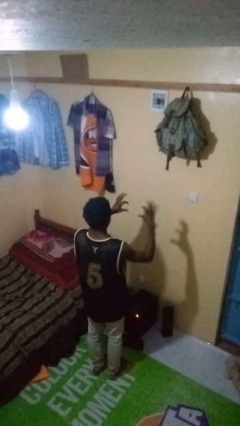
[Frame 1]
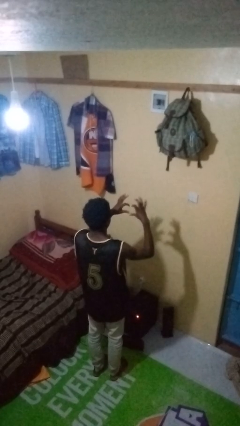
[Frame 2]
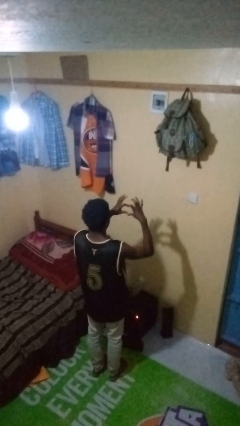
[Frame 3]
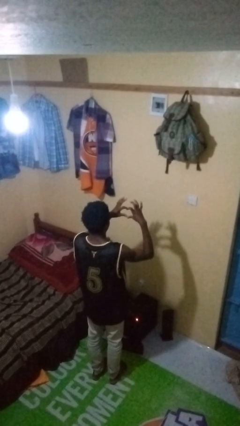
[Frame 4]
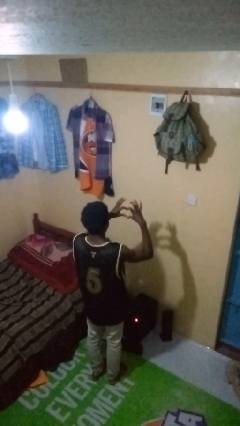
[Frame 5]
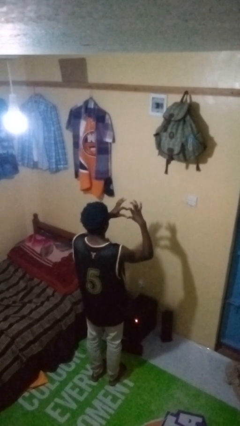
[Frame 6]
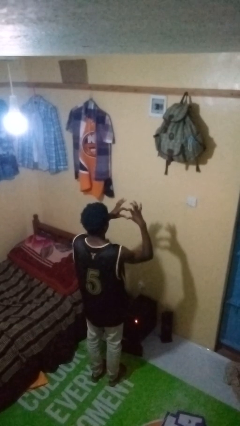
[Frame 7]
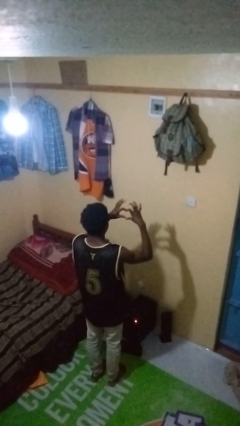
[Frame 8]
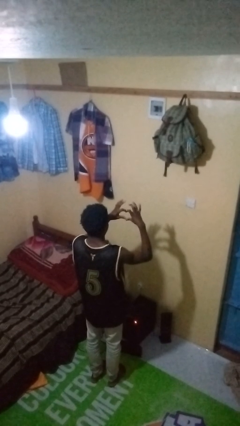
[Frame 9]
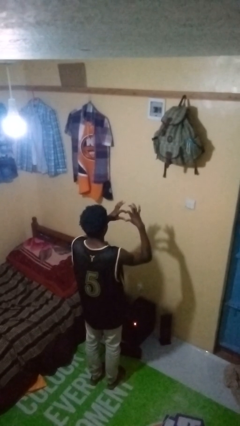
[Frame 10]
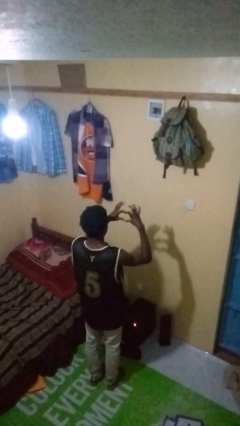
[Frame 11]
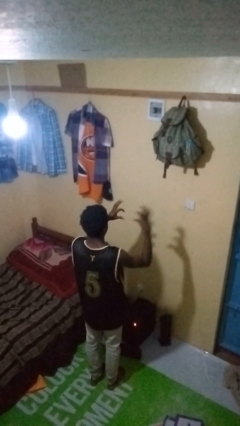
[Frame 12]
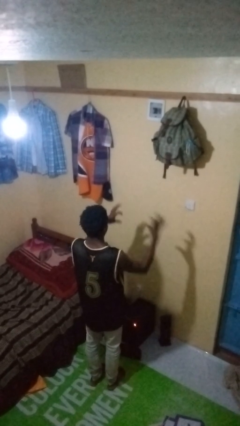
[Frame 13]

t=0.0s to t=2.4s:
person gestures heart

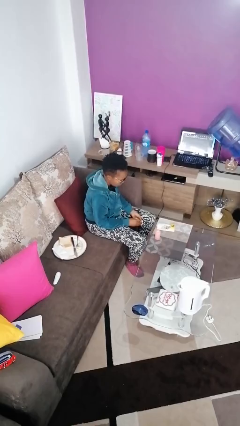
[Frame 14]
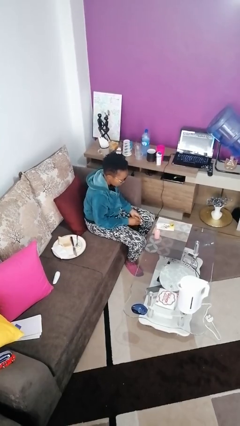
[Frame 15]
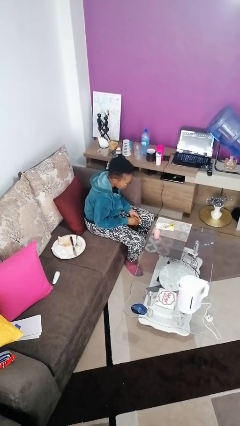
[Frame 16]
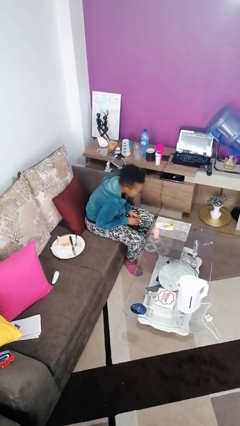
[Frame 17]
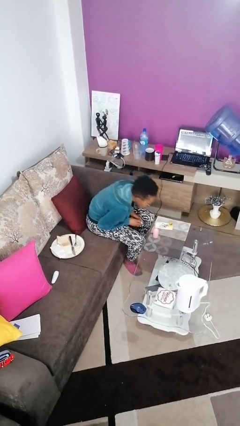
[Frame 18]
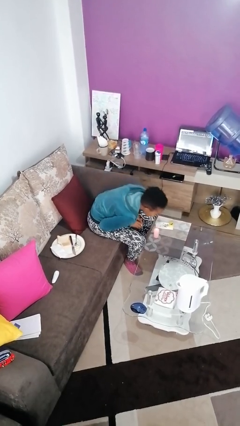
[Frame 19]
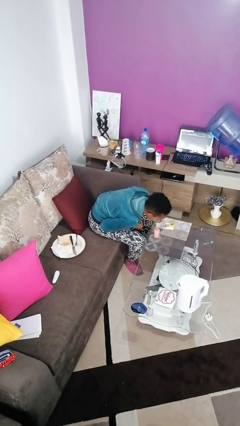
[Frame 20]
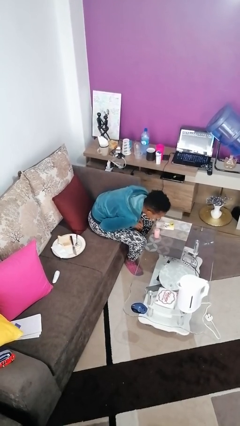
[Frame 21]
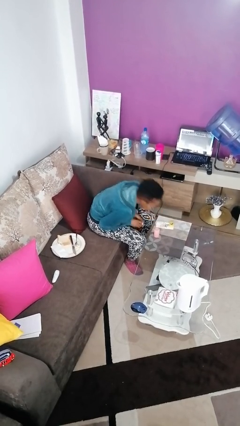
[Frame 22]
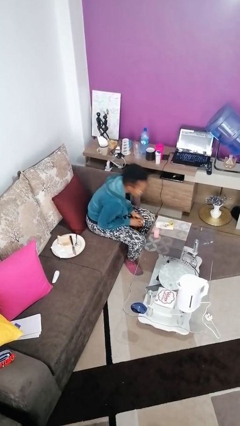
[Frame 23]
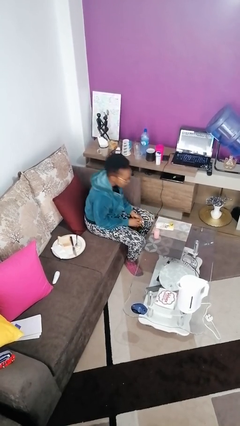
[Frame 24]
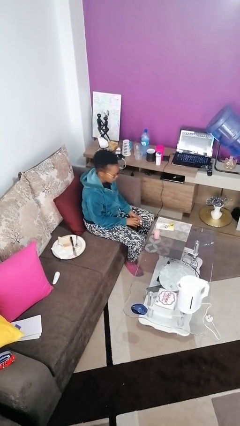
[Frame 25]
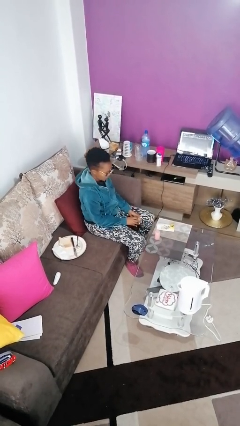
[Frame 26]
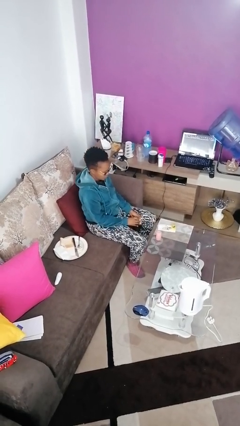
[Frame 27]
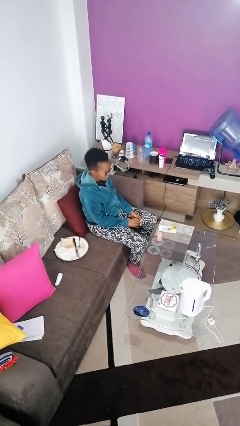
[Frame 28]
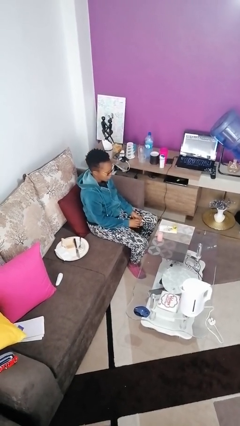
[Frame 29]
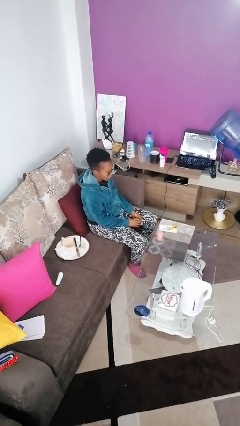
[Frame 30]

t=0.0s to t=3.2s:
person extinguishes candle

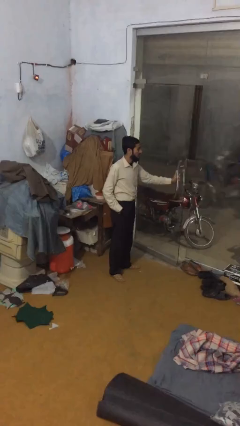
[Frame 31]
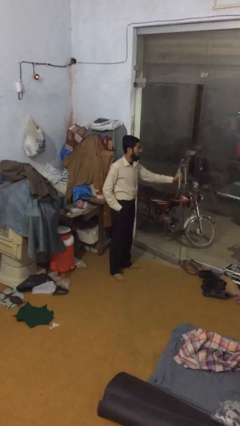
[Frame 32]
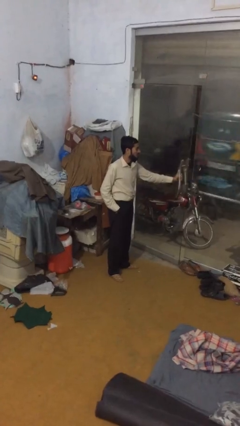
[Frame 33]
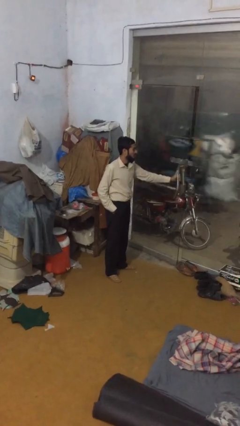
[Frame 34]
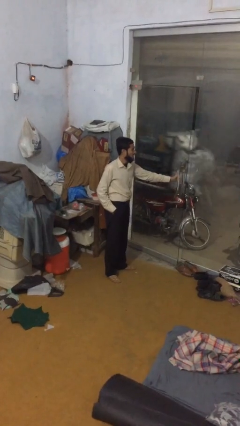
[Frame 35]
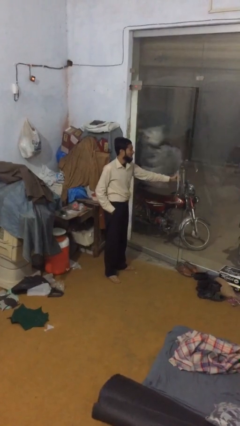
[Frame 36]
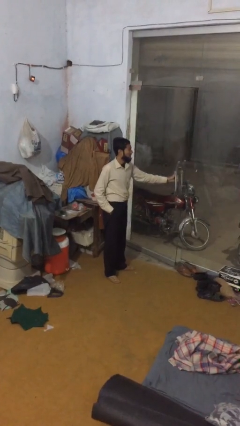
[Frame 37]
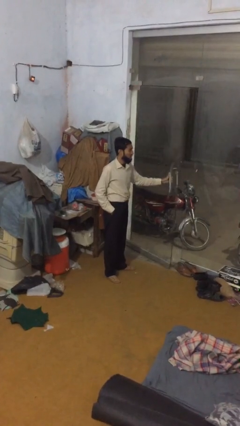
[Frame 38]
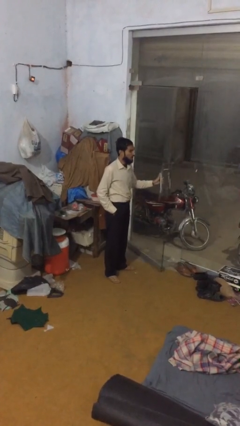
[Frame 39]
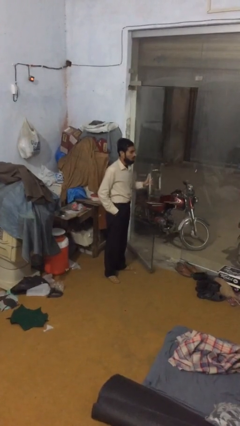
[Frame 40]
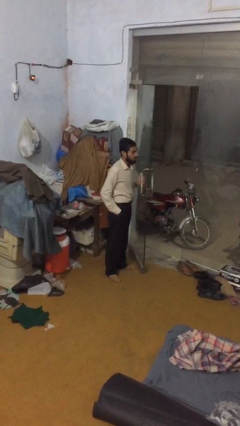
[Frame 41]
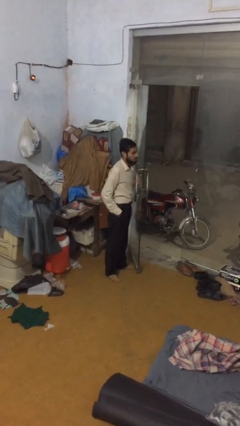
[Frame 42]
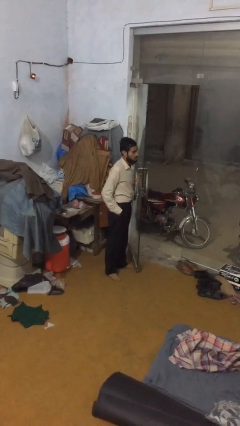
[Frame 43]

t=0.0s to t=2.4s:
person opens facility door

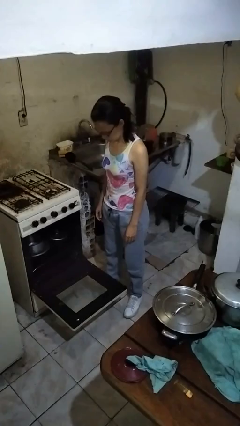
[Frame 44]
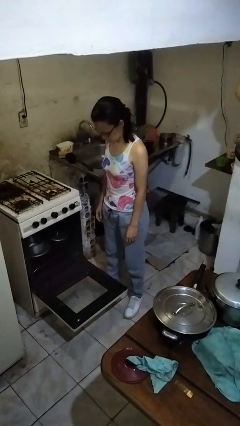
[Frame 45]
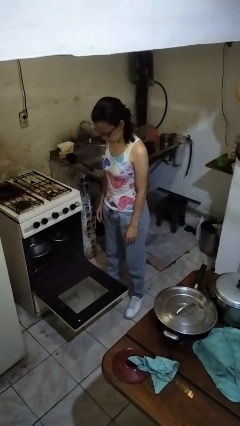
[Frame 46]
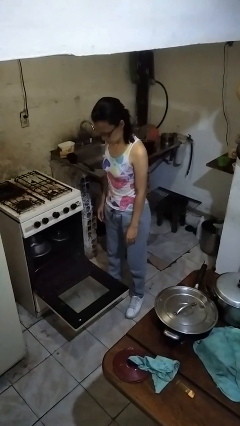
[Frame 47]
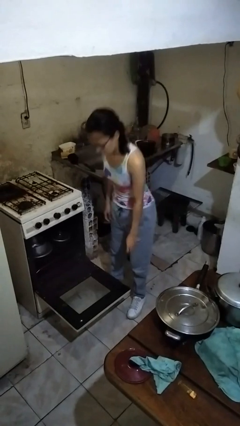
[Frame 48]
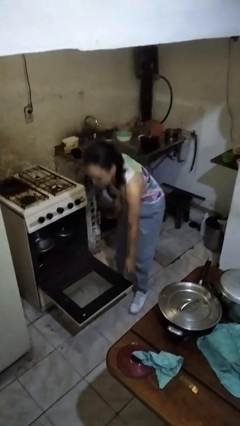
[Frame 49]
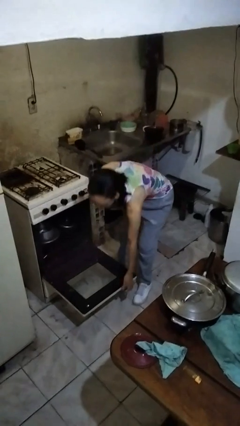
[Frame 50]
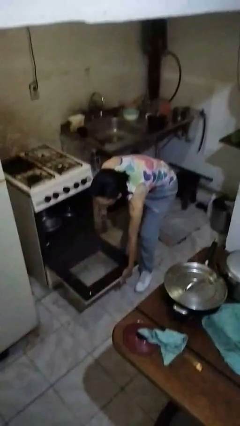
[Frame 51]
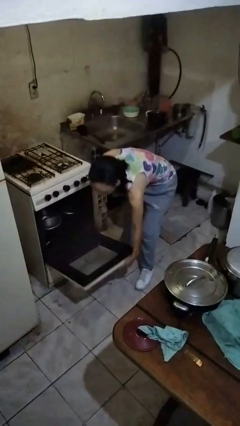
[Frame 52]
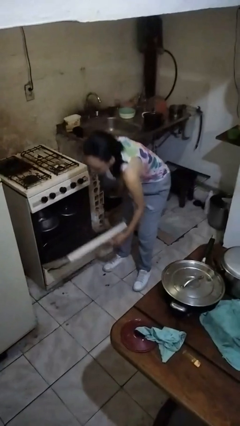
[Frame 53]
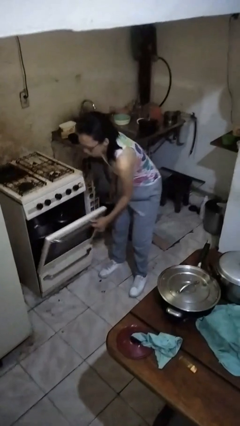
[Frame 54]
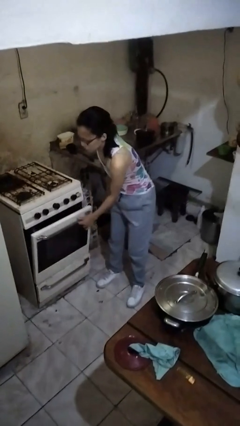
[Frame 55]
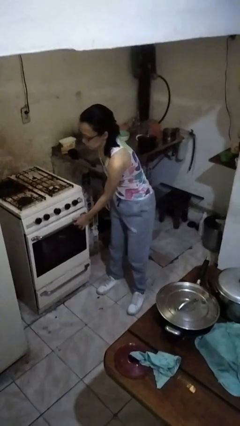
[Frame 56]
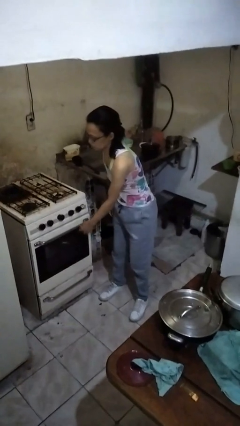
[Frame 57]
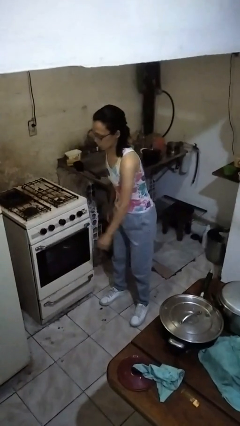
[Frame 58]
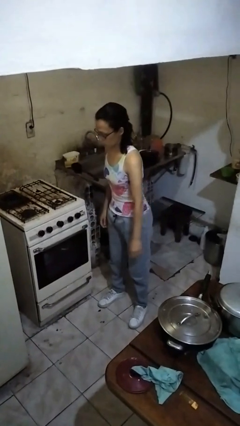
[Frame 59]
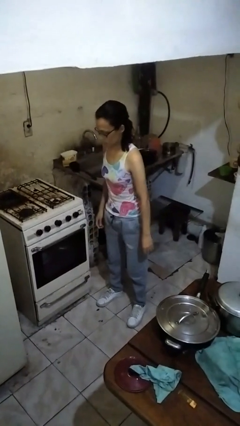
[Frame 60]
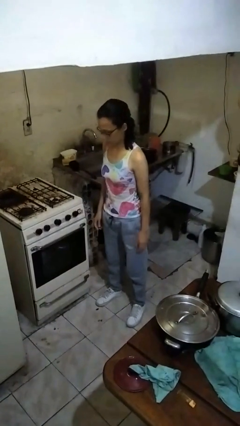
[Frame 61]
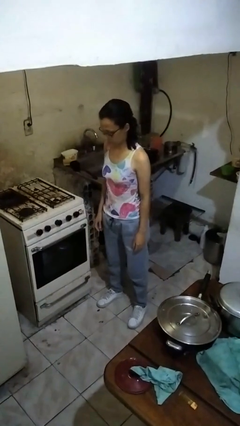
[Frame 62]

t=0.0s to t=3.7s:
person closes oven door

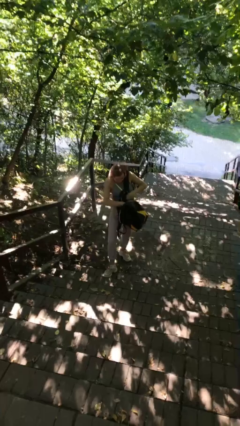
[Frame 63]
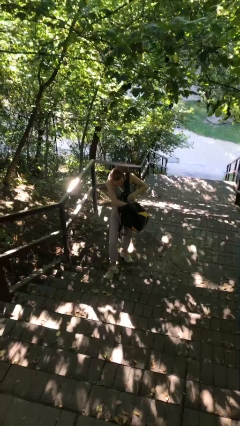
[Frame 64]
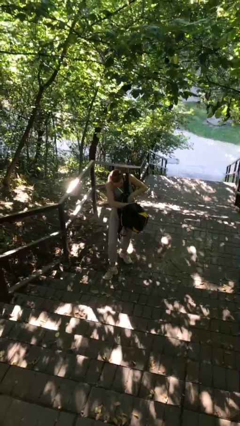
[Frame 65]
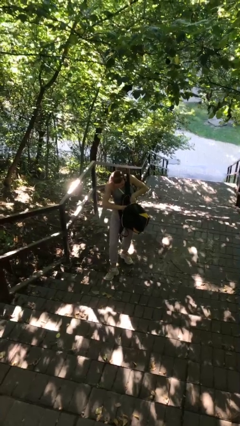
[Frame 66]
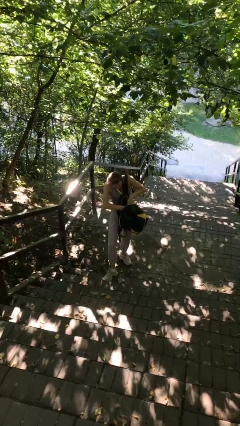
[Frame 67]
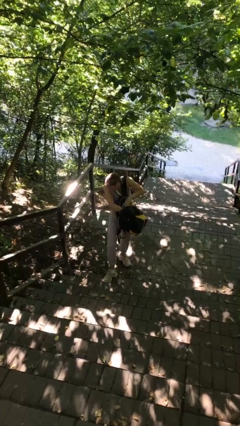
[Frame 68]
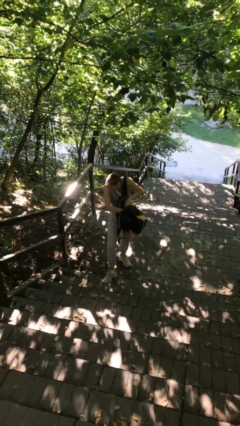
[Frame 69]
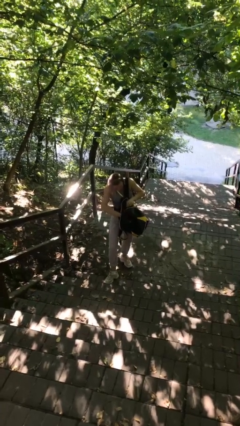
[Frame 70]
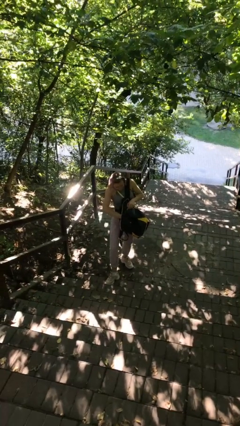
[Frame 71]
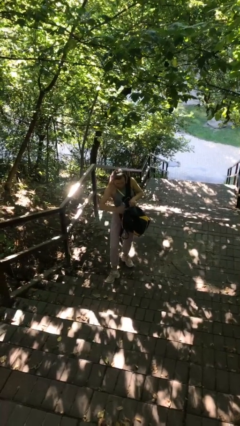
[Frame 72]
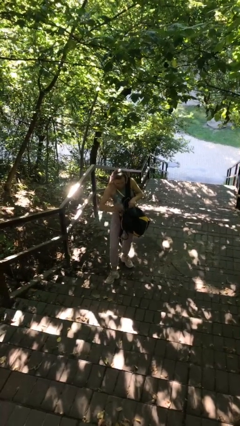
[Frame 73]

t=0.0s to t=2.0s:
person searches in backpack

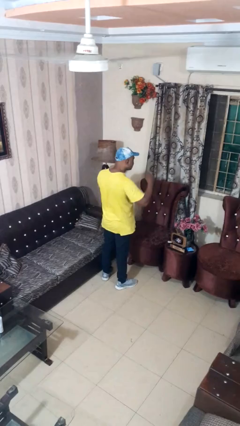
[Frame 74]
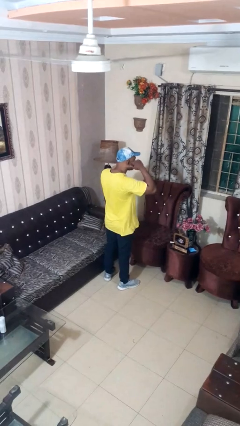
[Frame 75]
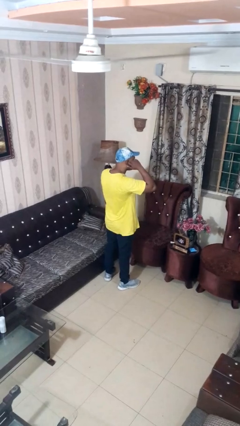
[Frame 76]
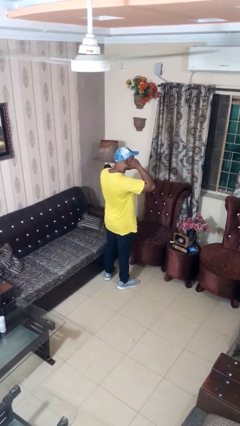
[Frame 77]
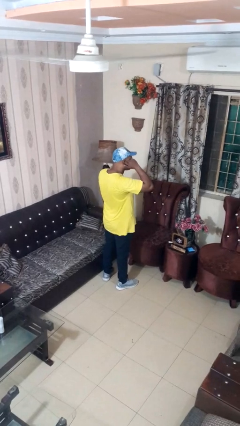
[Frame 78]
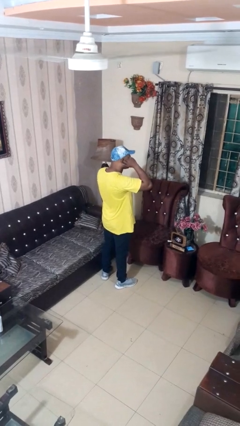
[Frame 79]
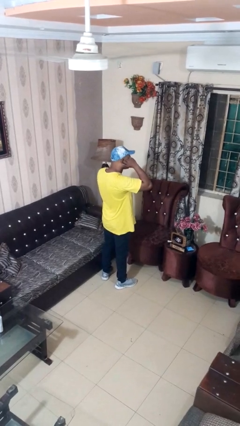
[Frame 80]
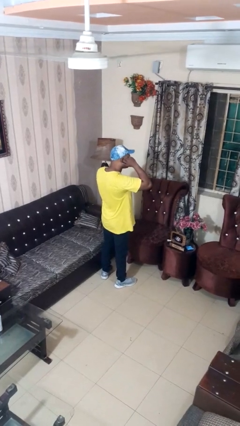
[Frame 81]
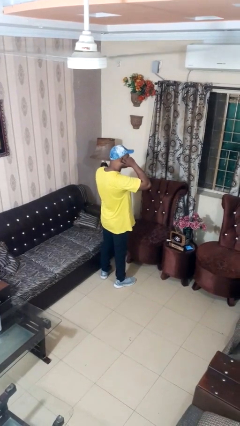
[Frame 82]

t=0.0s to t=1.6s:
person puts fingers in ear

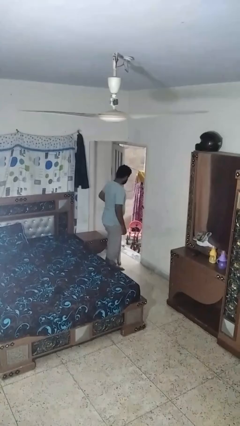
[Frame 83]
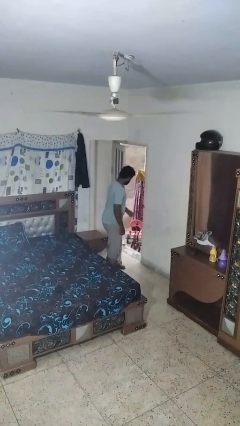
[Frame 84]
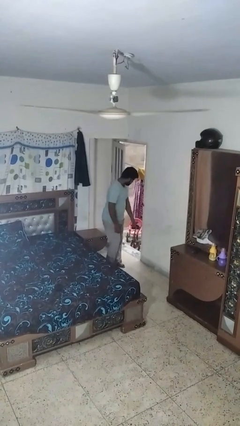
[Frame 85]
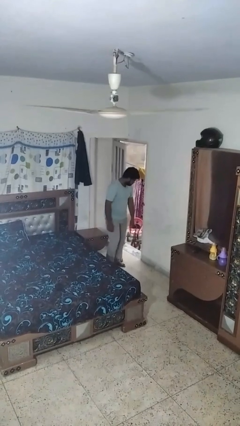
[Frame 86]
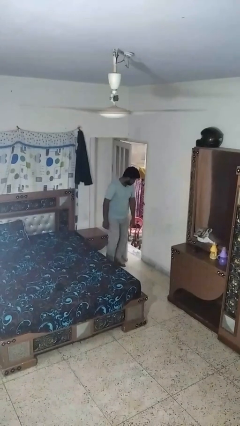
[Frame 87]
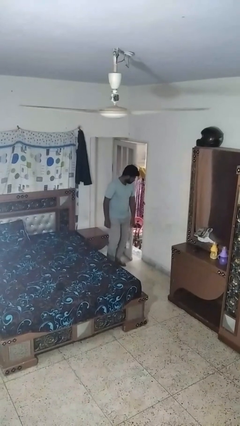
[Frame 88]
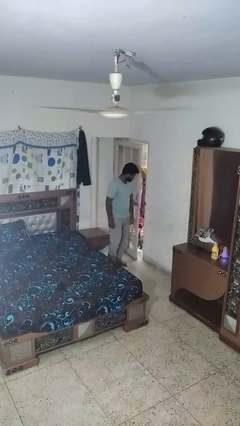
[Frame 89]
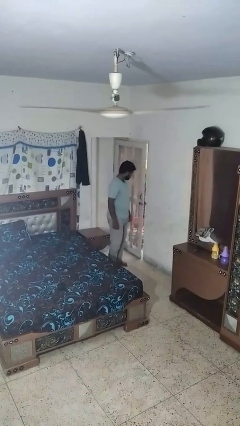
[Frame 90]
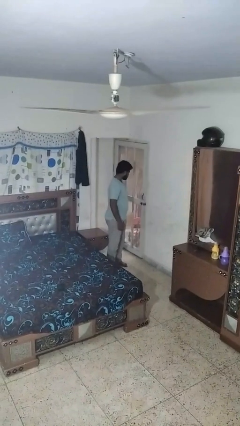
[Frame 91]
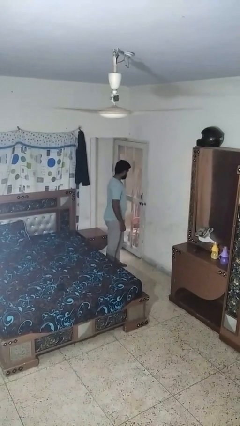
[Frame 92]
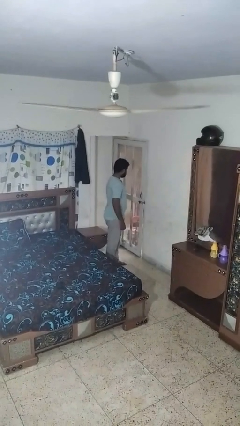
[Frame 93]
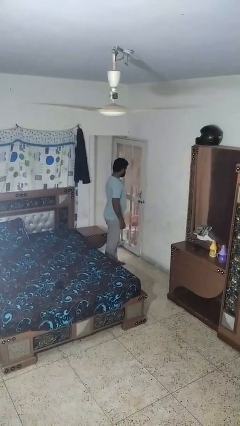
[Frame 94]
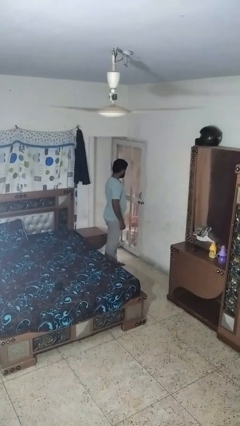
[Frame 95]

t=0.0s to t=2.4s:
person closes door with hip
